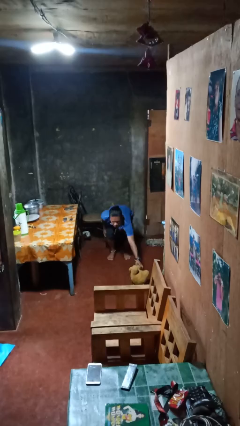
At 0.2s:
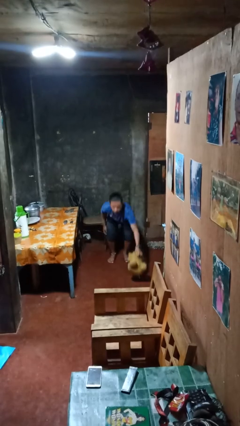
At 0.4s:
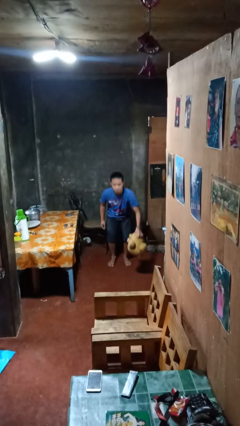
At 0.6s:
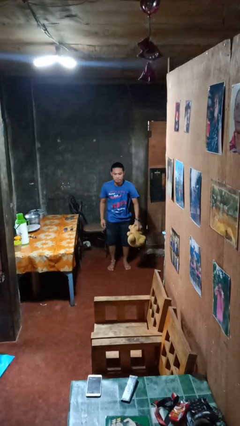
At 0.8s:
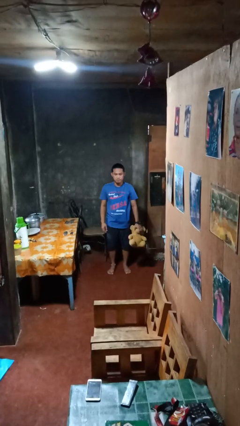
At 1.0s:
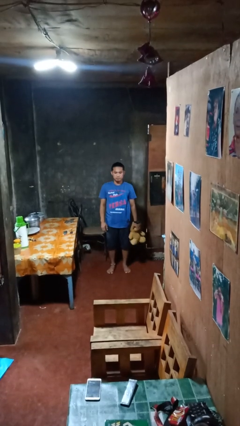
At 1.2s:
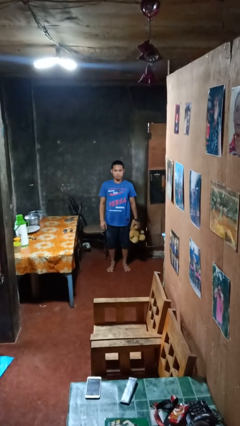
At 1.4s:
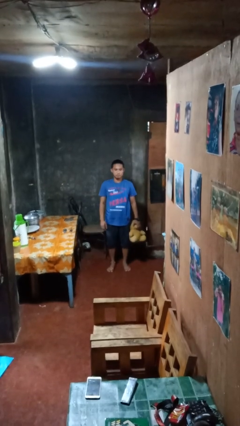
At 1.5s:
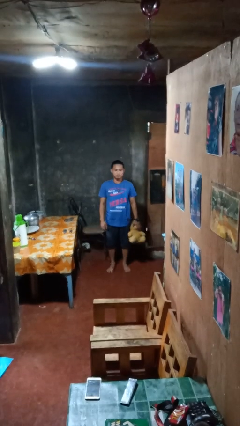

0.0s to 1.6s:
person picks up object from floor

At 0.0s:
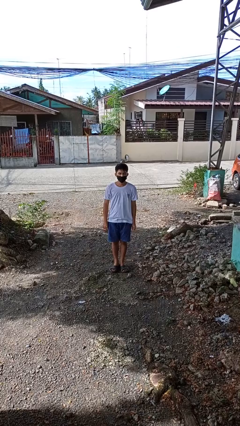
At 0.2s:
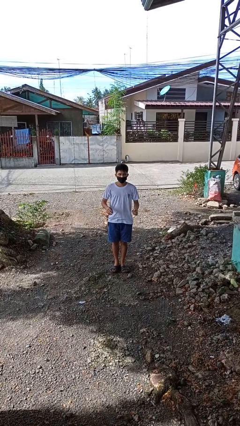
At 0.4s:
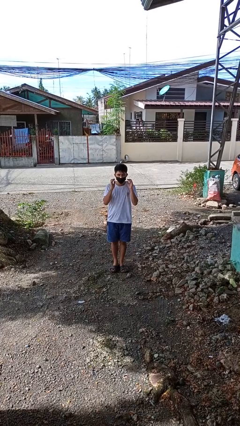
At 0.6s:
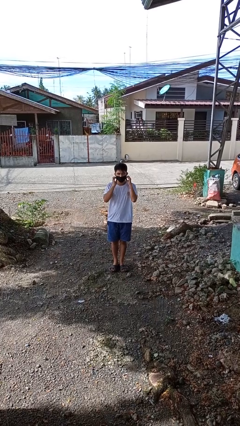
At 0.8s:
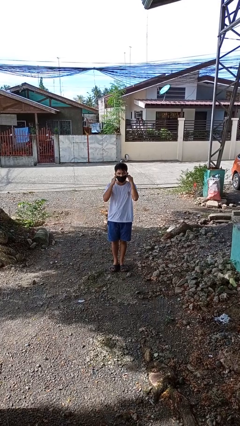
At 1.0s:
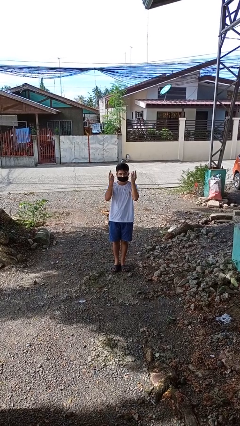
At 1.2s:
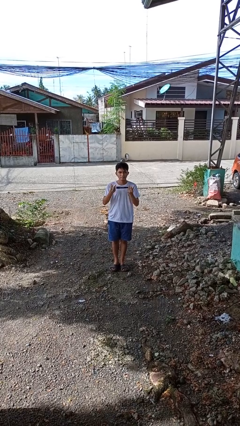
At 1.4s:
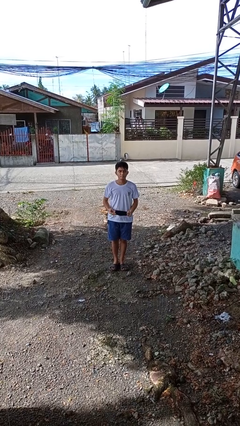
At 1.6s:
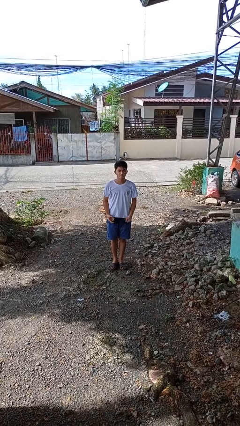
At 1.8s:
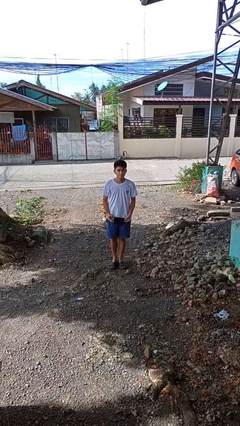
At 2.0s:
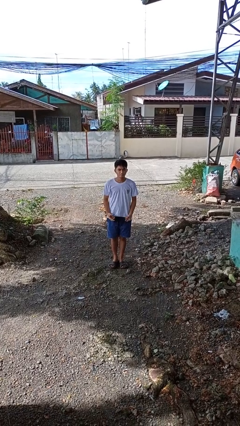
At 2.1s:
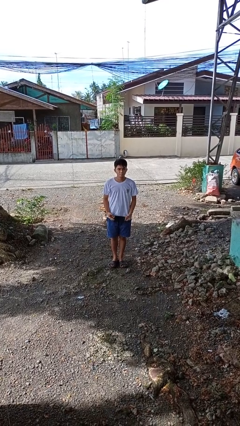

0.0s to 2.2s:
person takes off facemask

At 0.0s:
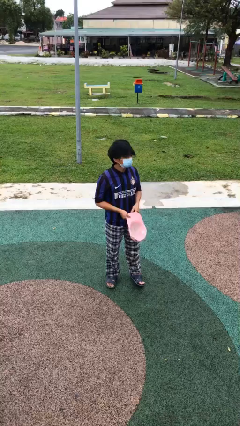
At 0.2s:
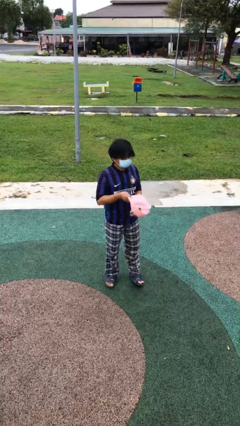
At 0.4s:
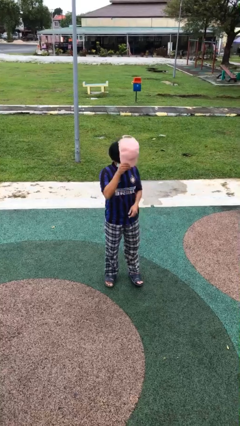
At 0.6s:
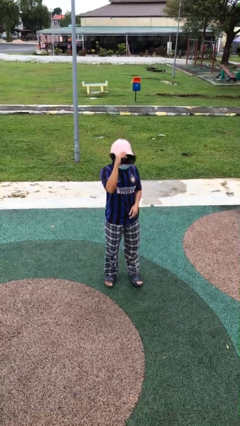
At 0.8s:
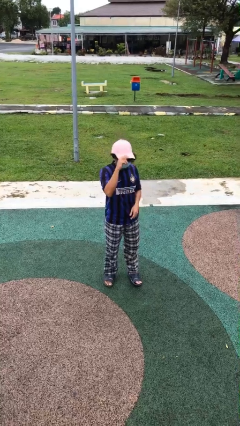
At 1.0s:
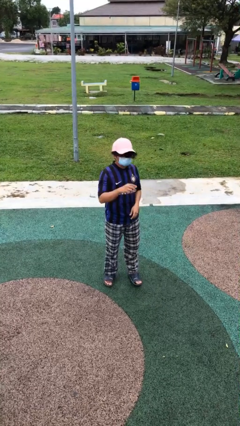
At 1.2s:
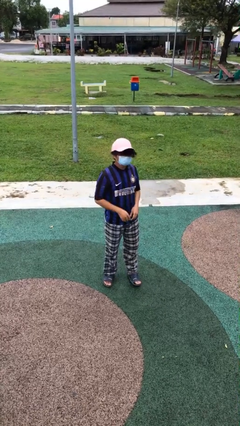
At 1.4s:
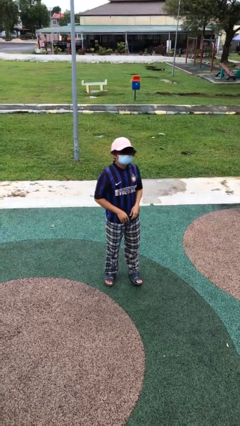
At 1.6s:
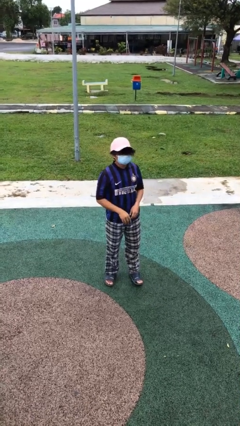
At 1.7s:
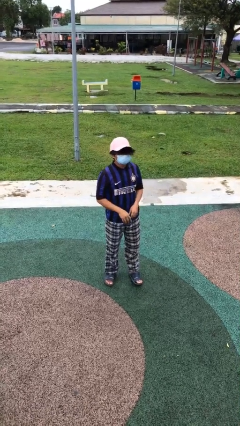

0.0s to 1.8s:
person puts on hat

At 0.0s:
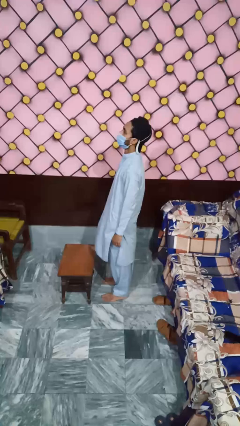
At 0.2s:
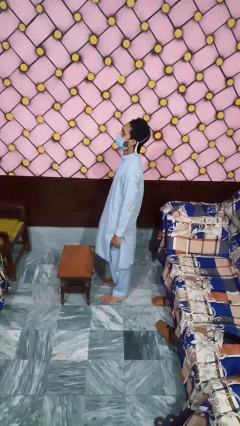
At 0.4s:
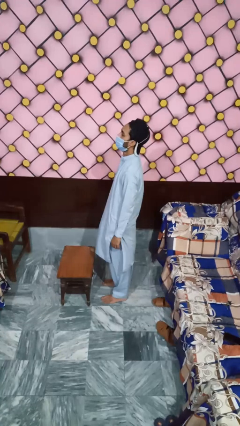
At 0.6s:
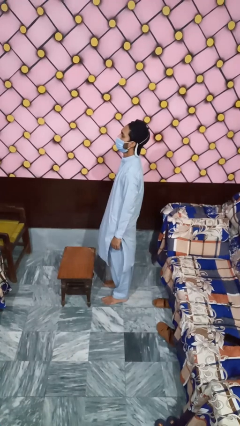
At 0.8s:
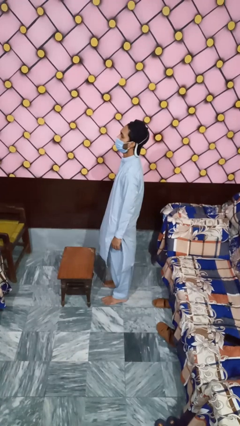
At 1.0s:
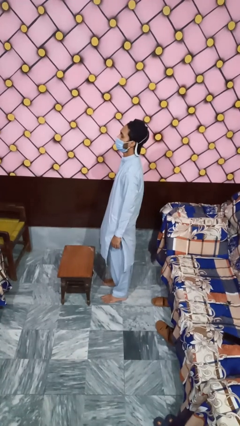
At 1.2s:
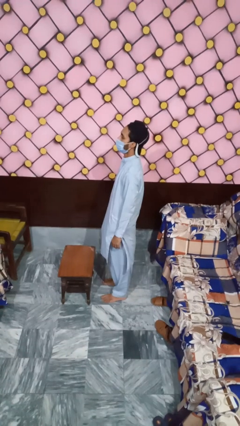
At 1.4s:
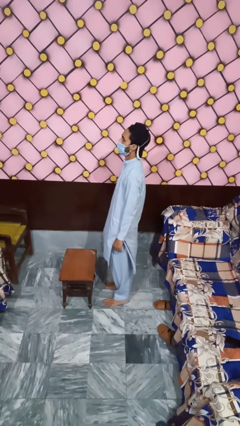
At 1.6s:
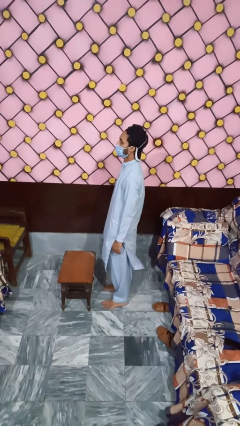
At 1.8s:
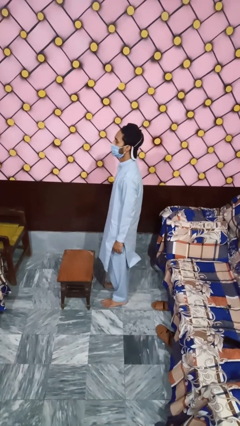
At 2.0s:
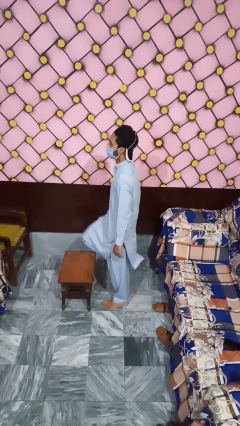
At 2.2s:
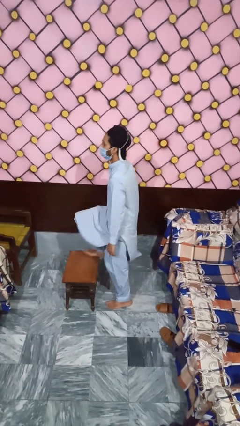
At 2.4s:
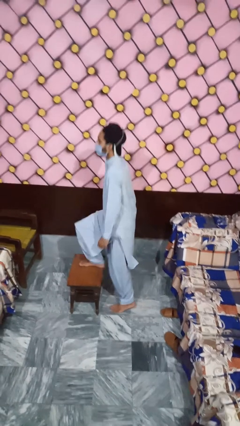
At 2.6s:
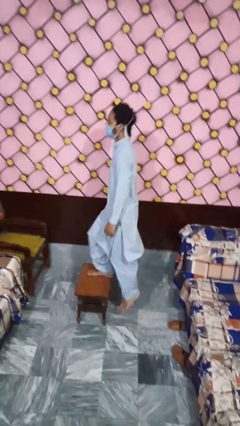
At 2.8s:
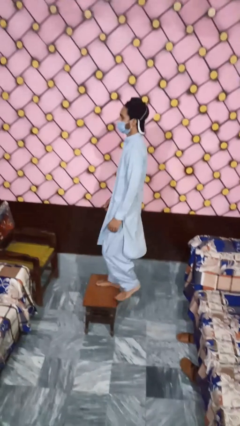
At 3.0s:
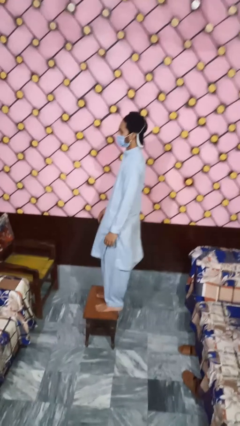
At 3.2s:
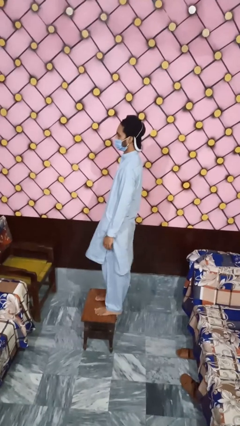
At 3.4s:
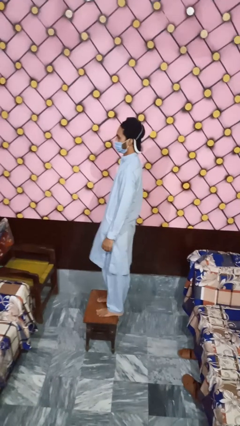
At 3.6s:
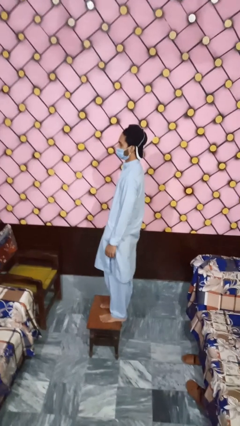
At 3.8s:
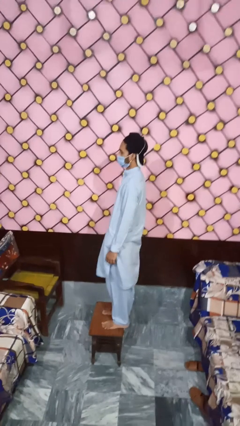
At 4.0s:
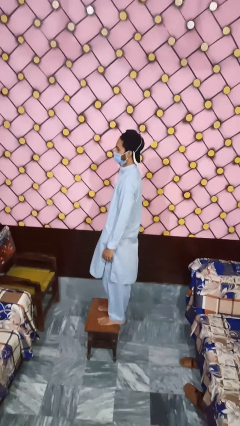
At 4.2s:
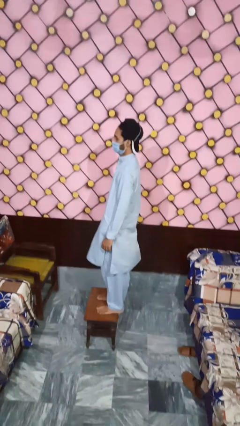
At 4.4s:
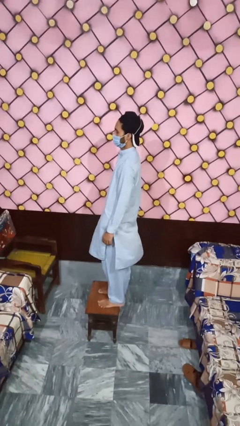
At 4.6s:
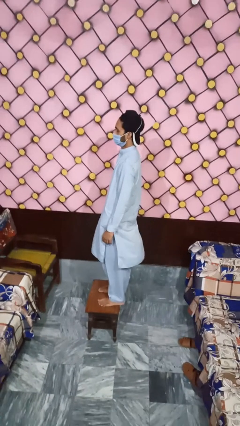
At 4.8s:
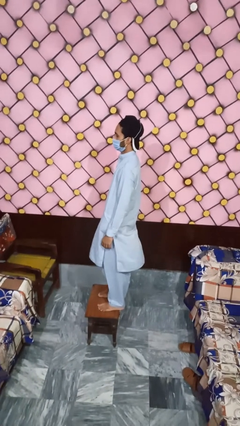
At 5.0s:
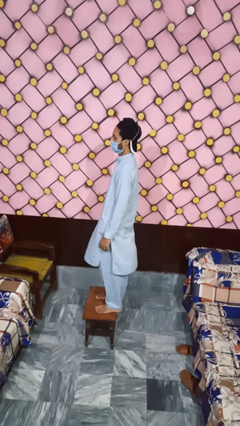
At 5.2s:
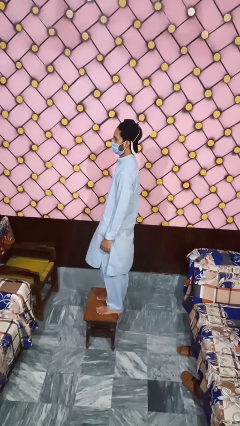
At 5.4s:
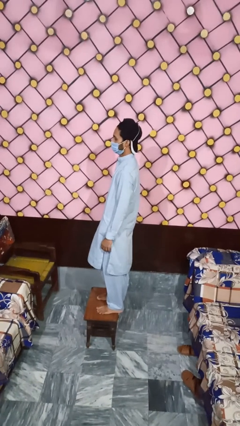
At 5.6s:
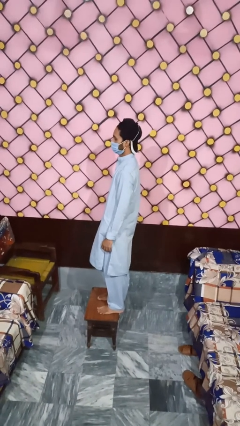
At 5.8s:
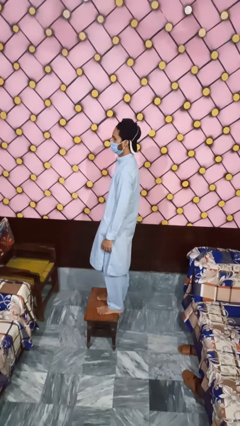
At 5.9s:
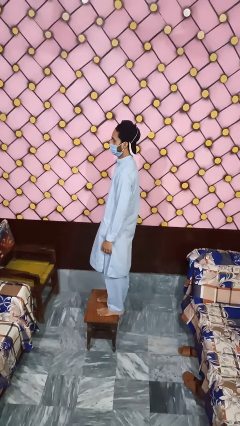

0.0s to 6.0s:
person climbs on table

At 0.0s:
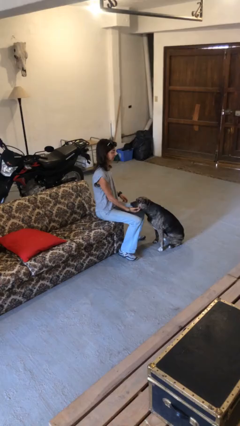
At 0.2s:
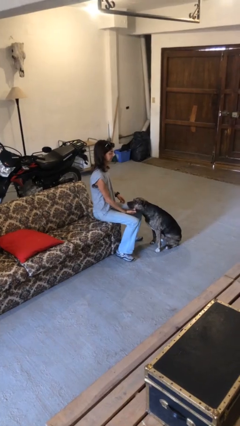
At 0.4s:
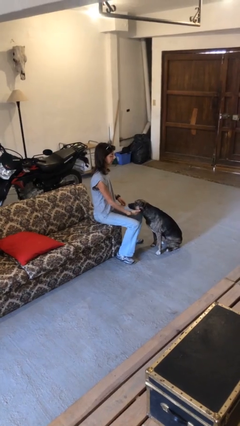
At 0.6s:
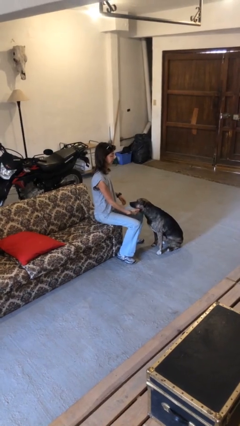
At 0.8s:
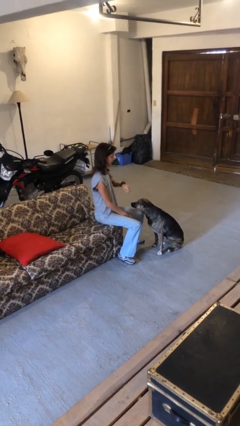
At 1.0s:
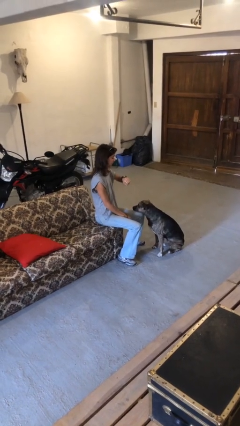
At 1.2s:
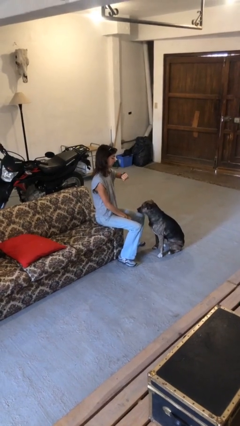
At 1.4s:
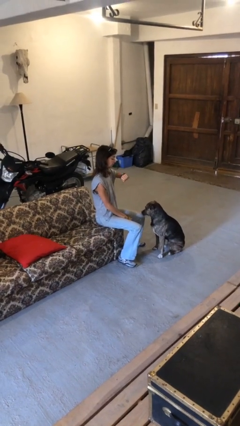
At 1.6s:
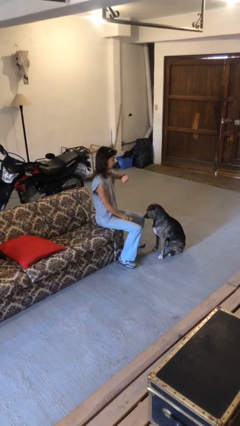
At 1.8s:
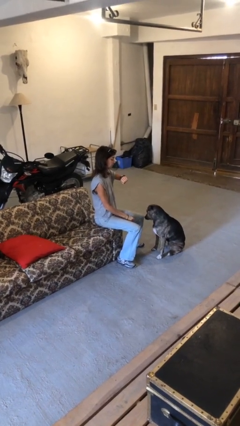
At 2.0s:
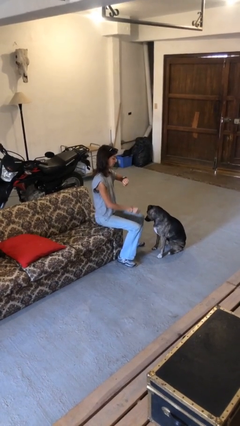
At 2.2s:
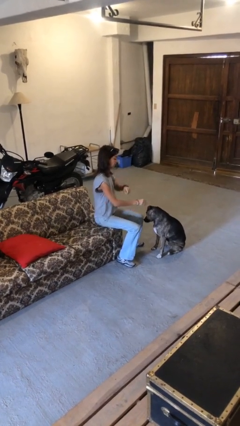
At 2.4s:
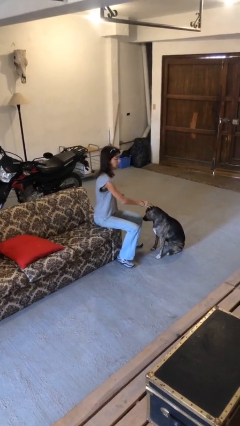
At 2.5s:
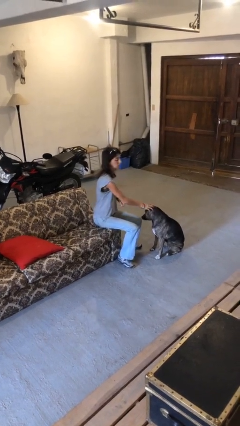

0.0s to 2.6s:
person looks at wristwatch

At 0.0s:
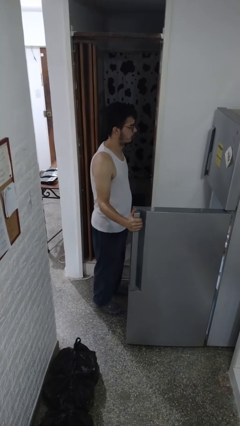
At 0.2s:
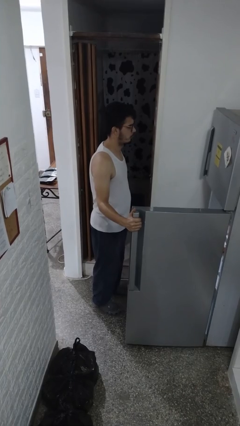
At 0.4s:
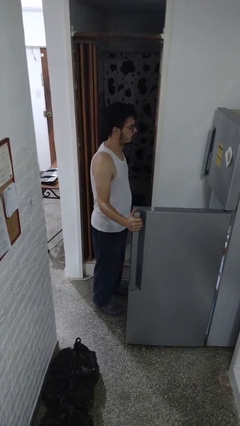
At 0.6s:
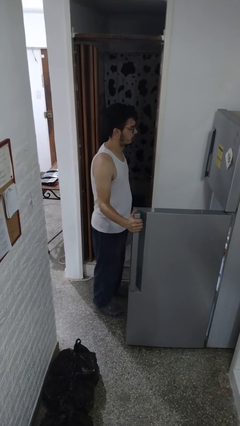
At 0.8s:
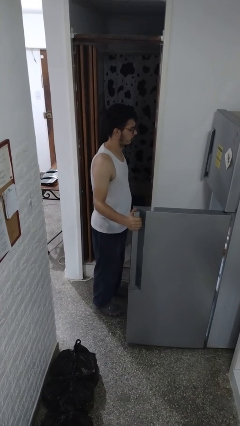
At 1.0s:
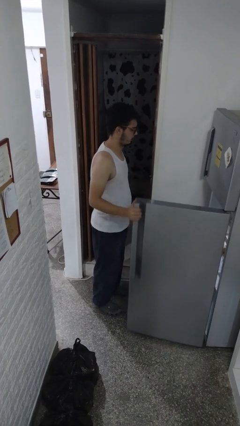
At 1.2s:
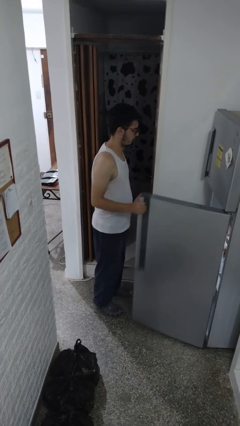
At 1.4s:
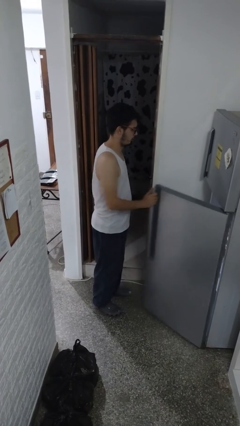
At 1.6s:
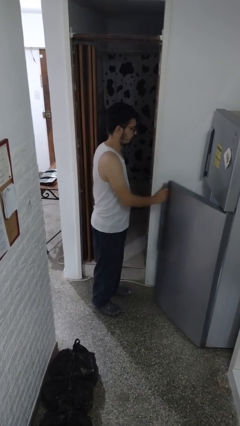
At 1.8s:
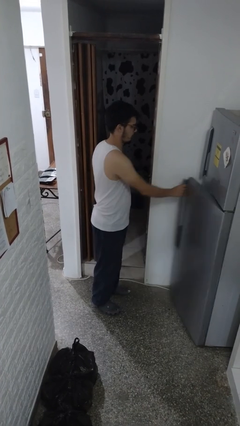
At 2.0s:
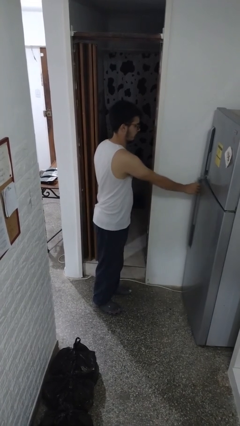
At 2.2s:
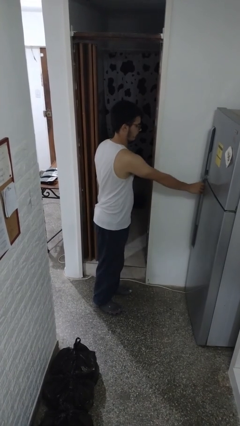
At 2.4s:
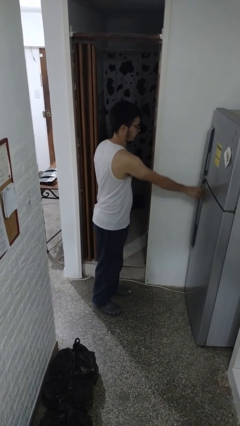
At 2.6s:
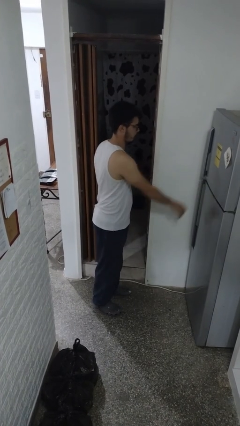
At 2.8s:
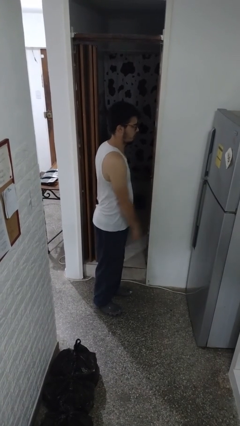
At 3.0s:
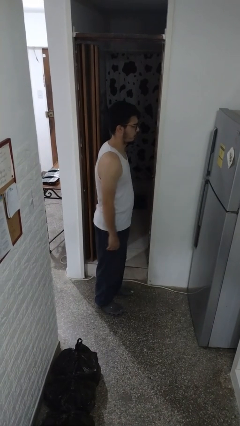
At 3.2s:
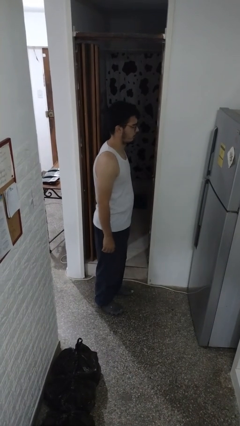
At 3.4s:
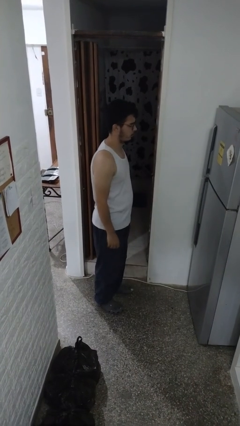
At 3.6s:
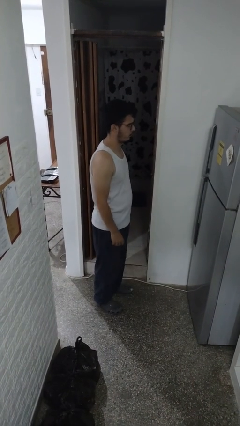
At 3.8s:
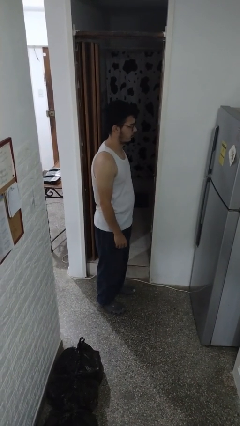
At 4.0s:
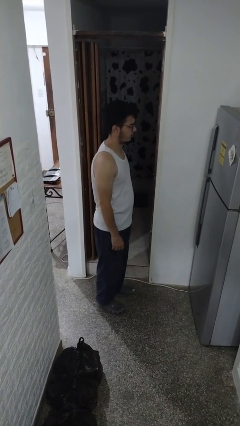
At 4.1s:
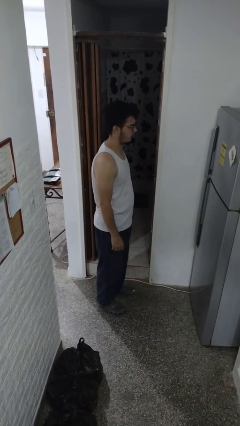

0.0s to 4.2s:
person closes refrigerator
